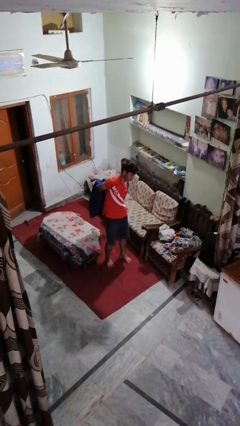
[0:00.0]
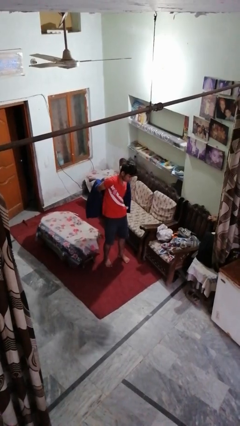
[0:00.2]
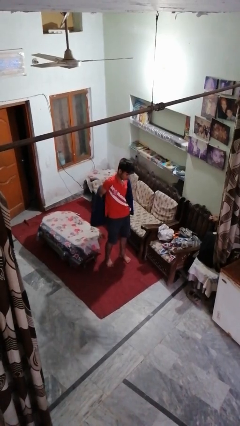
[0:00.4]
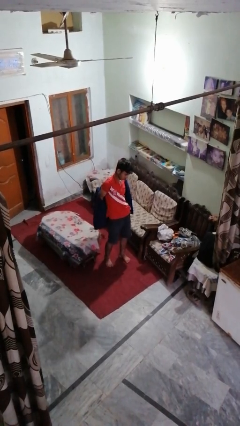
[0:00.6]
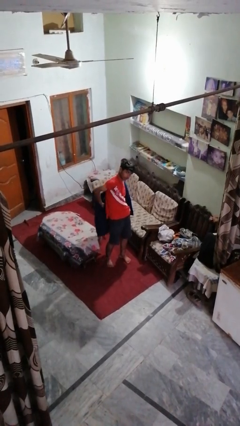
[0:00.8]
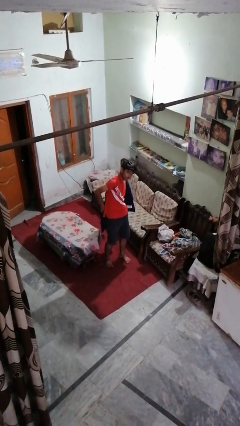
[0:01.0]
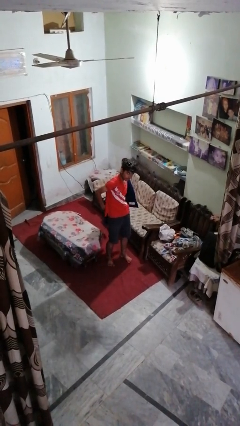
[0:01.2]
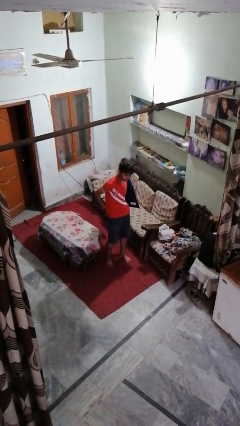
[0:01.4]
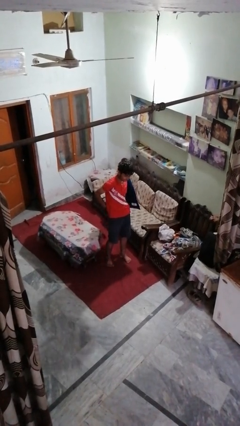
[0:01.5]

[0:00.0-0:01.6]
person takes off jacket

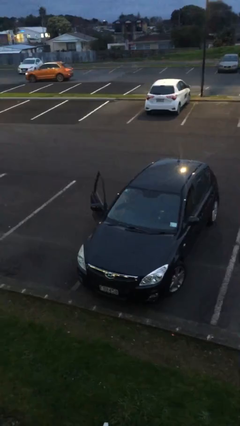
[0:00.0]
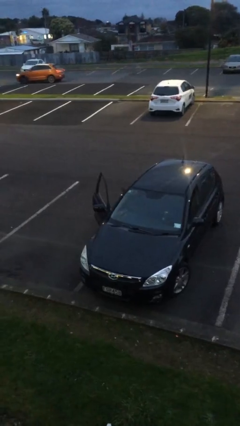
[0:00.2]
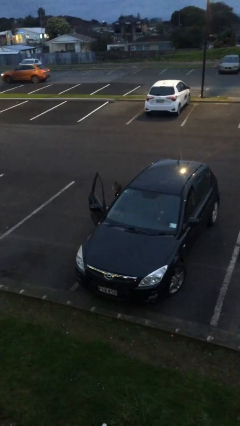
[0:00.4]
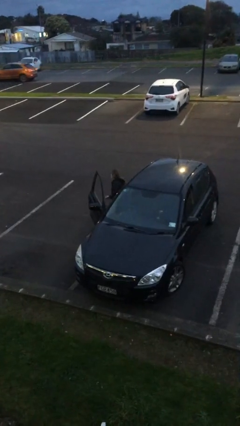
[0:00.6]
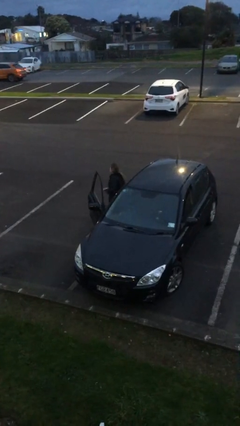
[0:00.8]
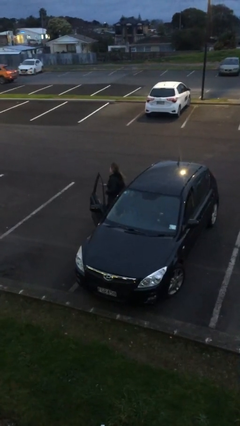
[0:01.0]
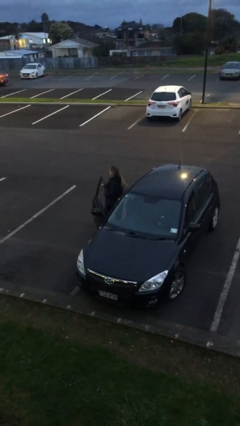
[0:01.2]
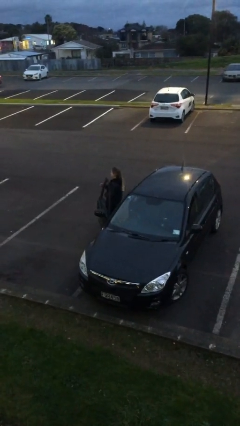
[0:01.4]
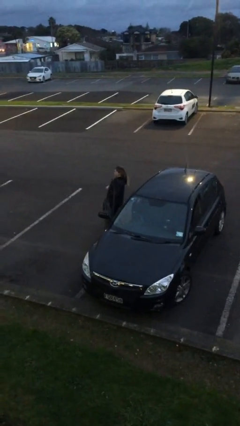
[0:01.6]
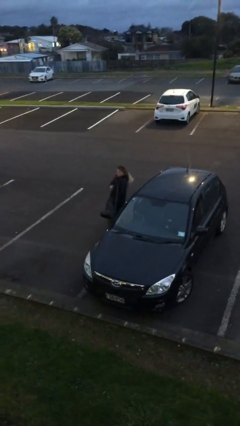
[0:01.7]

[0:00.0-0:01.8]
person exits car

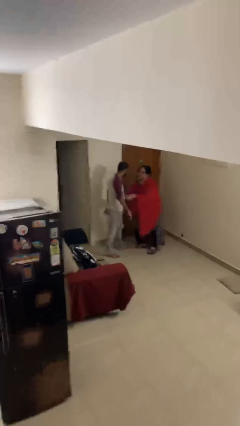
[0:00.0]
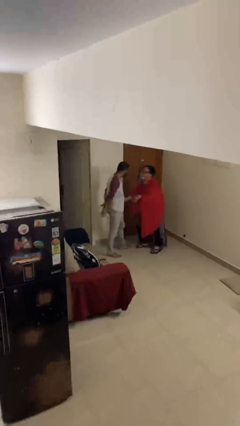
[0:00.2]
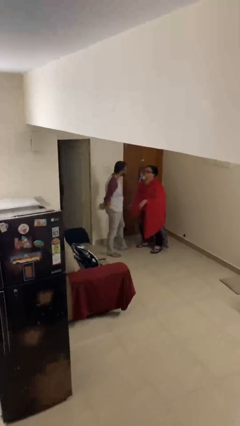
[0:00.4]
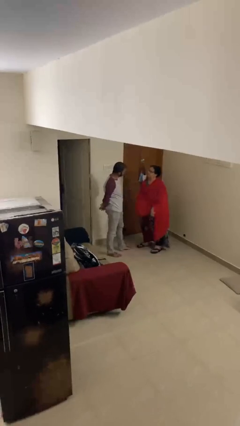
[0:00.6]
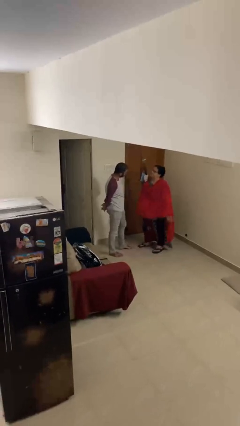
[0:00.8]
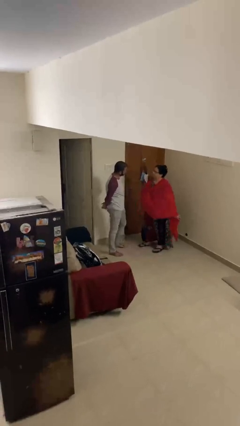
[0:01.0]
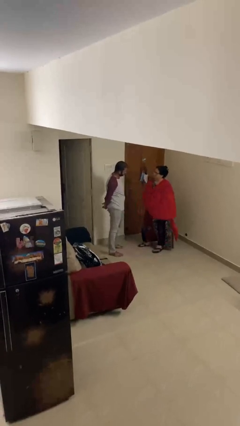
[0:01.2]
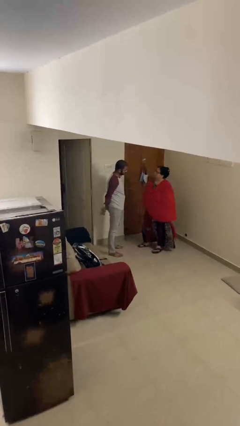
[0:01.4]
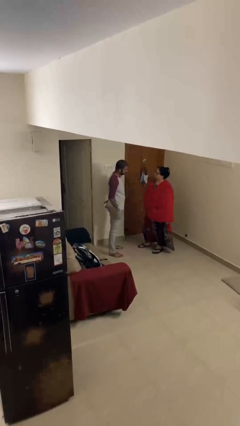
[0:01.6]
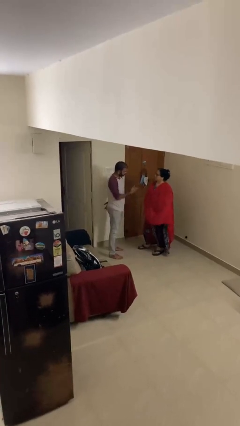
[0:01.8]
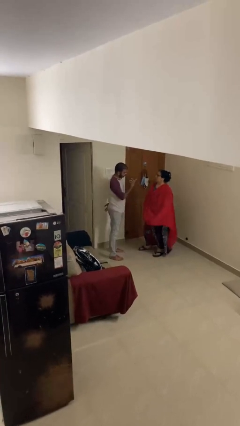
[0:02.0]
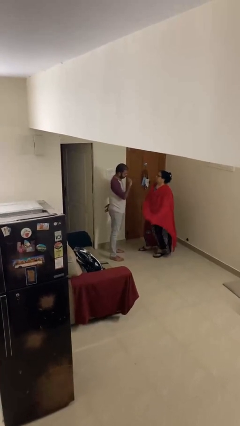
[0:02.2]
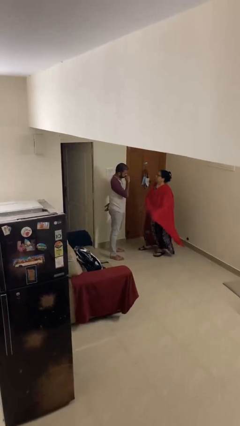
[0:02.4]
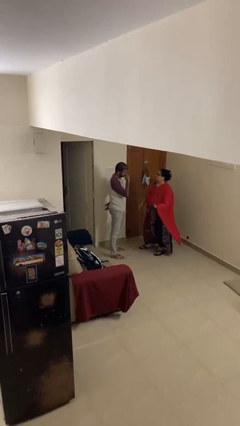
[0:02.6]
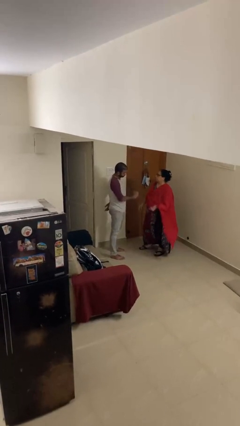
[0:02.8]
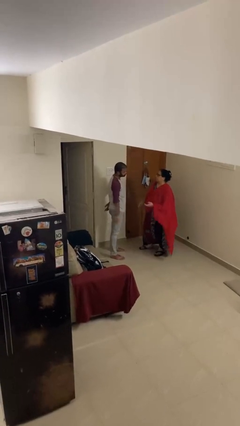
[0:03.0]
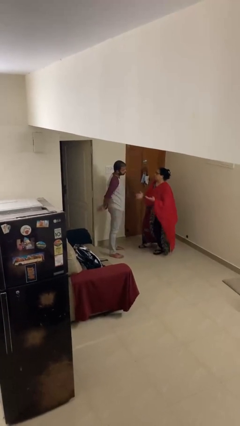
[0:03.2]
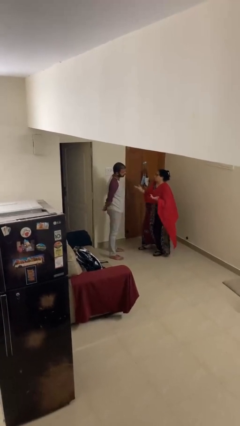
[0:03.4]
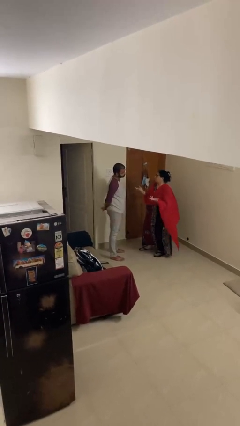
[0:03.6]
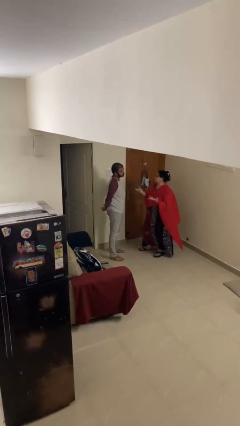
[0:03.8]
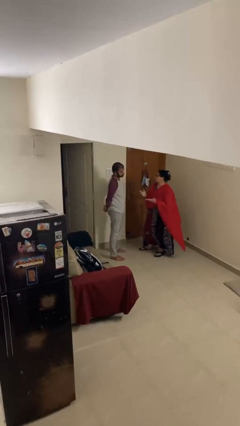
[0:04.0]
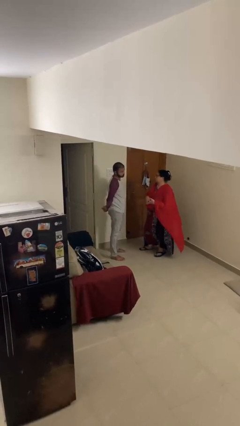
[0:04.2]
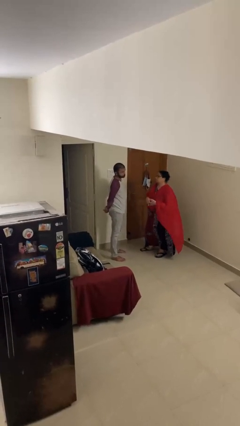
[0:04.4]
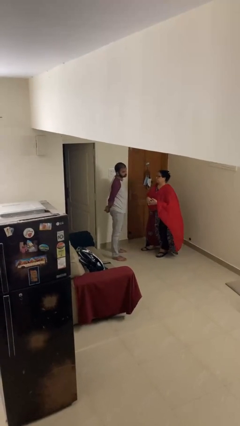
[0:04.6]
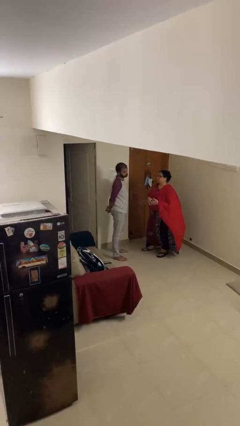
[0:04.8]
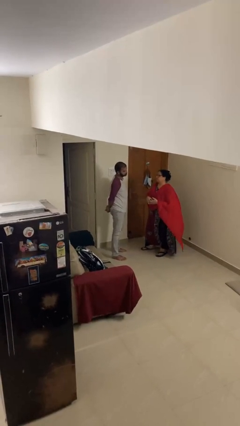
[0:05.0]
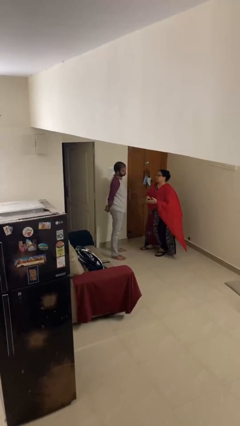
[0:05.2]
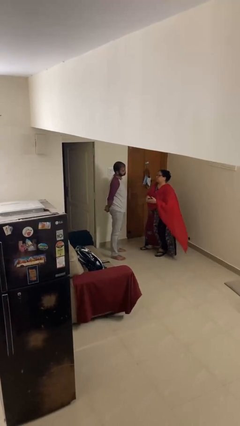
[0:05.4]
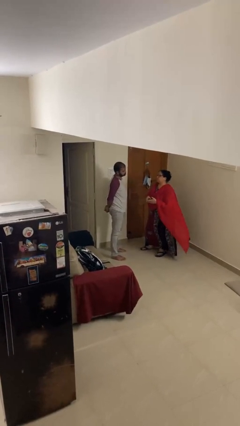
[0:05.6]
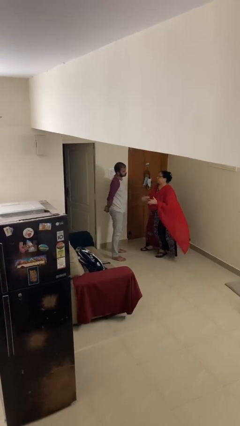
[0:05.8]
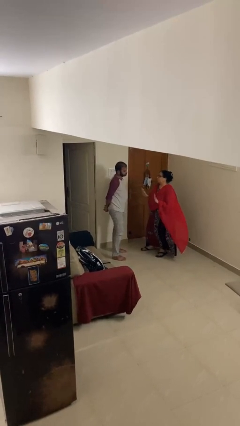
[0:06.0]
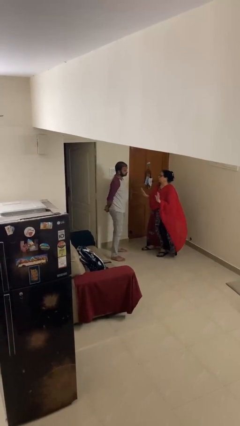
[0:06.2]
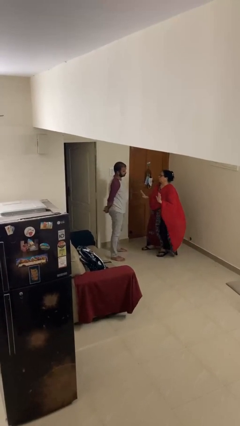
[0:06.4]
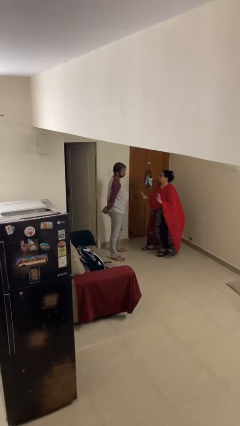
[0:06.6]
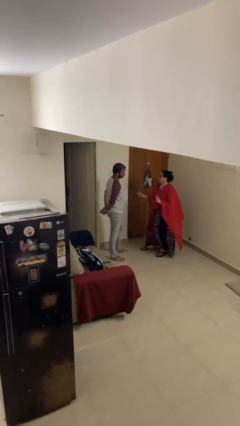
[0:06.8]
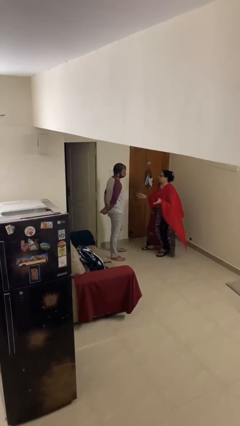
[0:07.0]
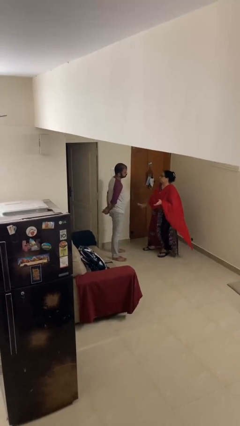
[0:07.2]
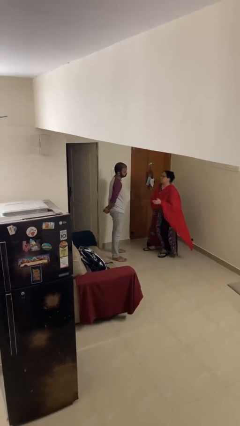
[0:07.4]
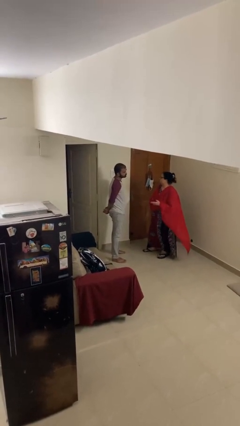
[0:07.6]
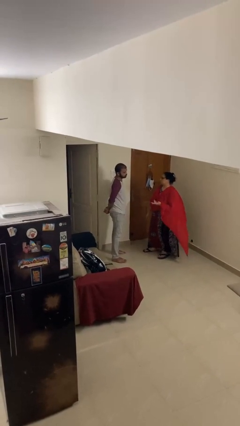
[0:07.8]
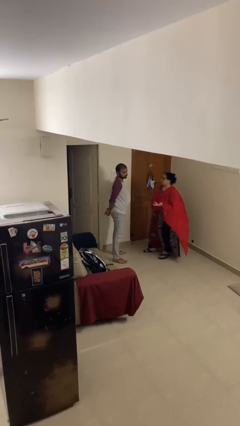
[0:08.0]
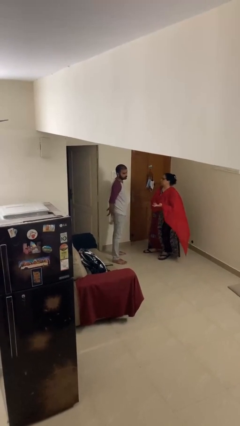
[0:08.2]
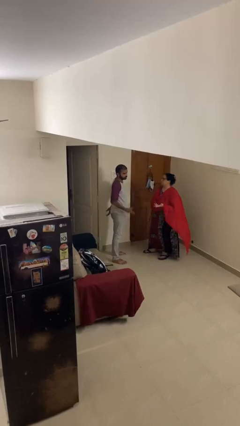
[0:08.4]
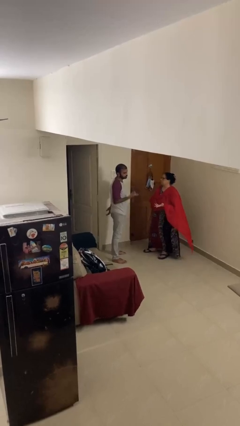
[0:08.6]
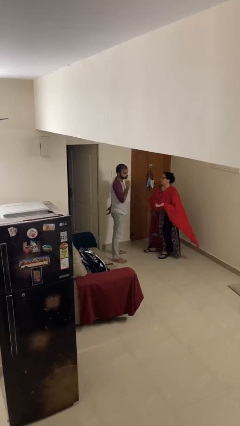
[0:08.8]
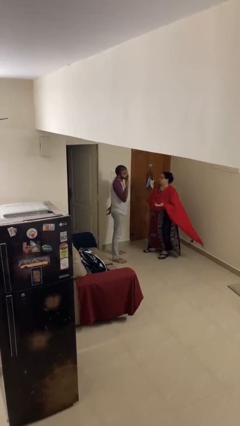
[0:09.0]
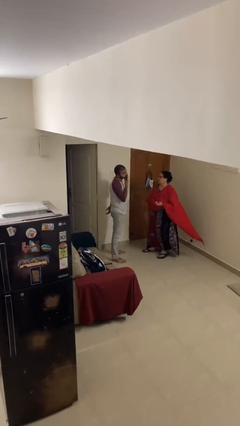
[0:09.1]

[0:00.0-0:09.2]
person talks to person

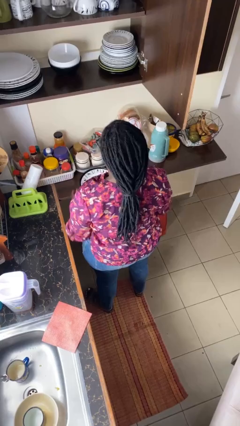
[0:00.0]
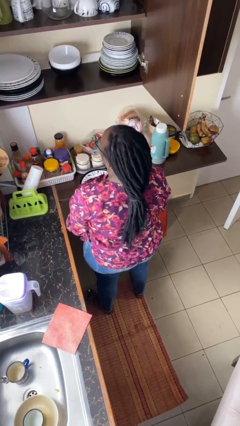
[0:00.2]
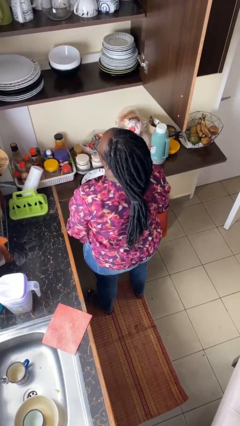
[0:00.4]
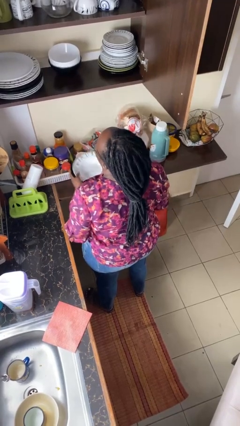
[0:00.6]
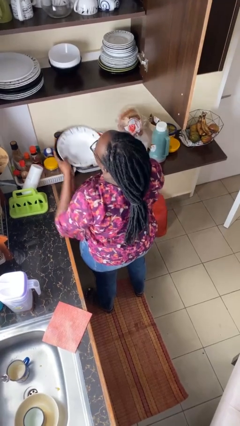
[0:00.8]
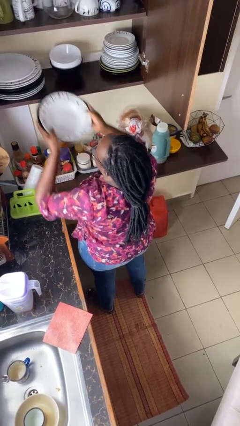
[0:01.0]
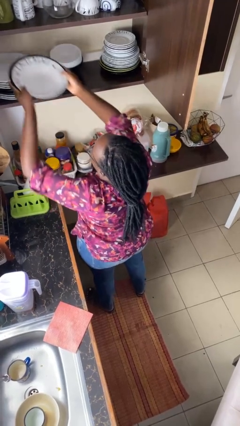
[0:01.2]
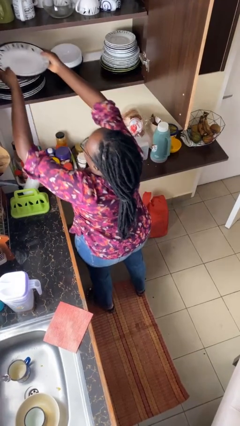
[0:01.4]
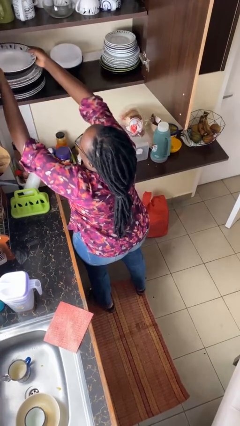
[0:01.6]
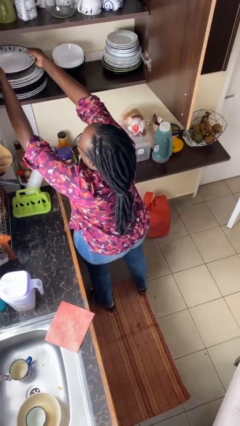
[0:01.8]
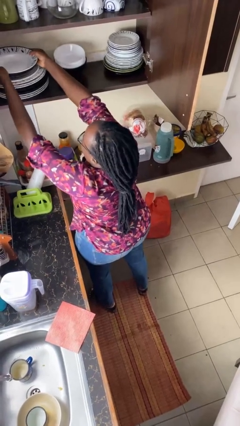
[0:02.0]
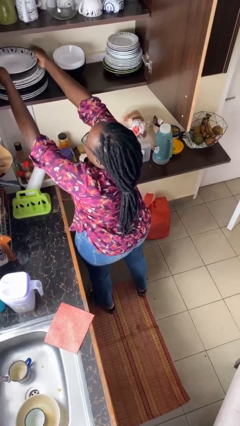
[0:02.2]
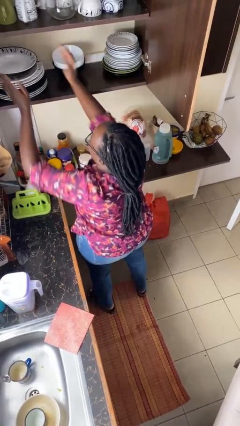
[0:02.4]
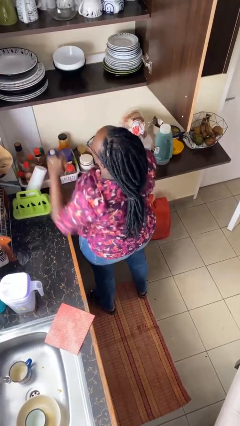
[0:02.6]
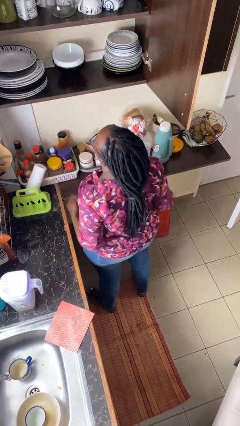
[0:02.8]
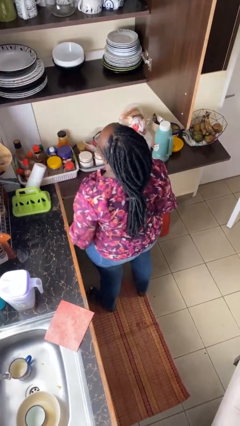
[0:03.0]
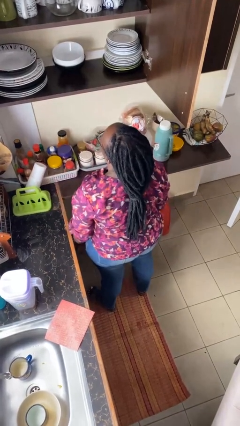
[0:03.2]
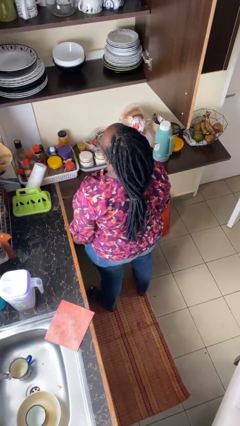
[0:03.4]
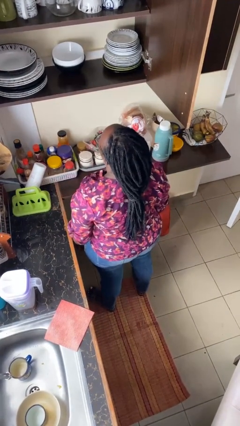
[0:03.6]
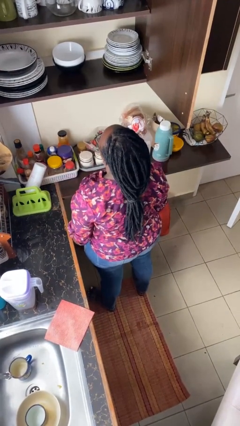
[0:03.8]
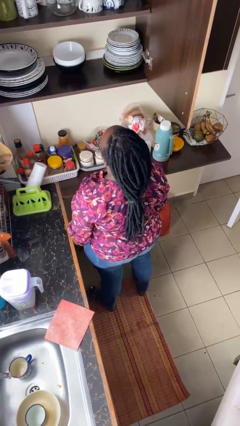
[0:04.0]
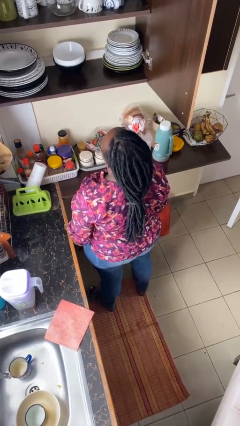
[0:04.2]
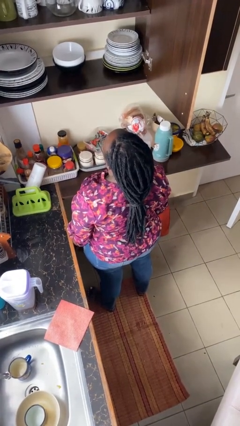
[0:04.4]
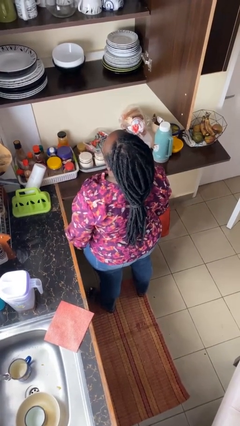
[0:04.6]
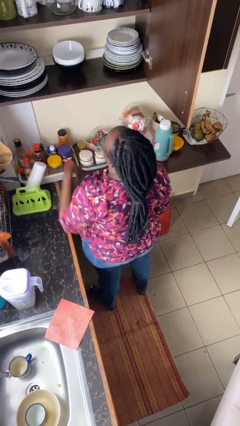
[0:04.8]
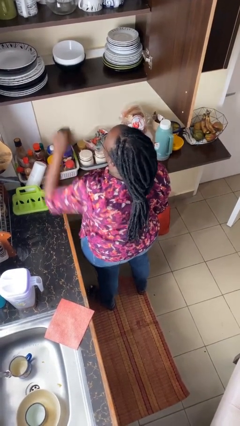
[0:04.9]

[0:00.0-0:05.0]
person puts object in cabinet

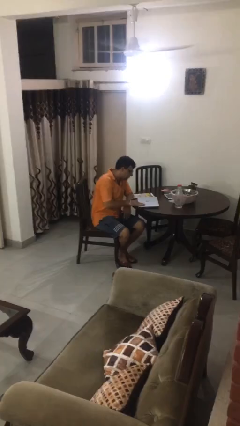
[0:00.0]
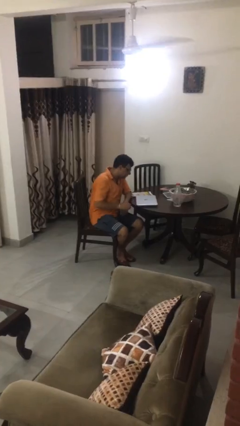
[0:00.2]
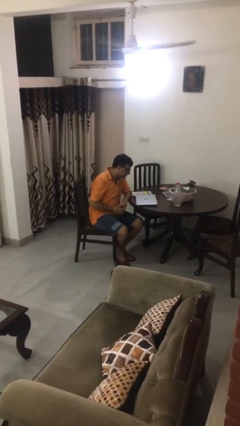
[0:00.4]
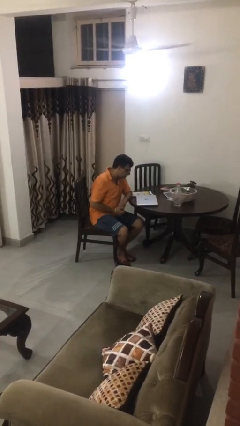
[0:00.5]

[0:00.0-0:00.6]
person waves hand over object
